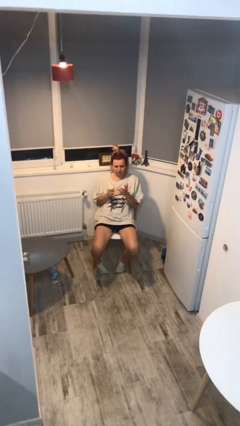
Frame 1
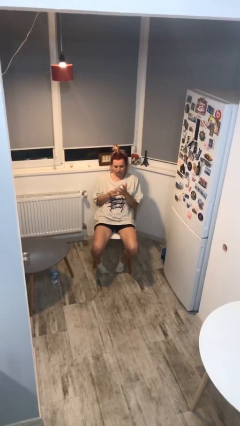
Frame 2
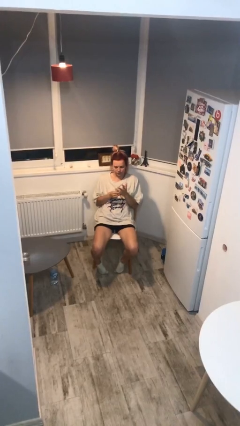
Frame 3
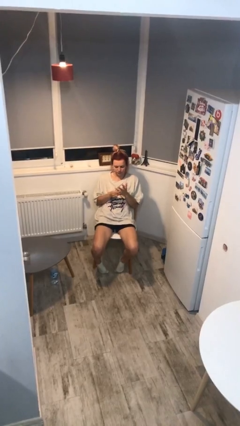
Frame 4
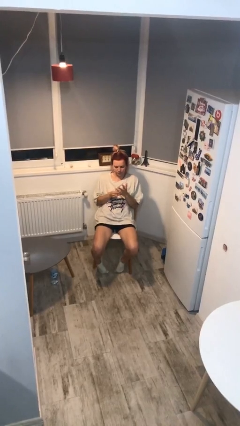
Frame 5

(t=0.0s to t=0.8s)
person puts on ring

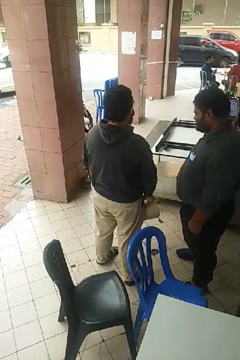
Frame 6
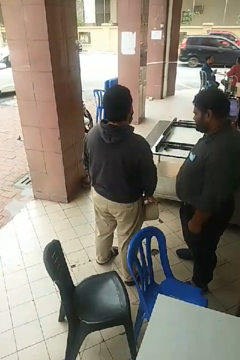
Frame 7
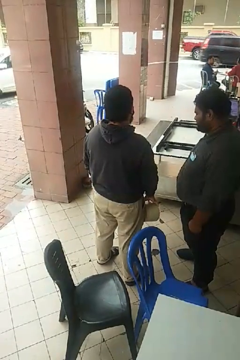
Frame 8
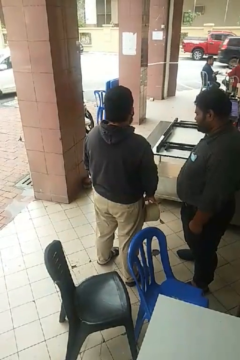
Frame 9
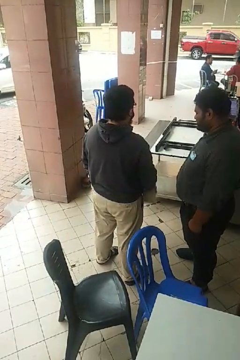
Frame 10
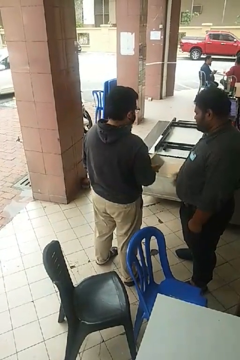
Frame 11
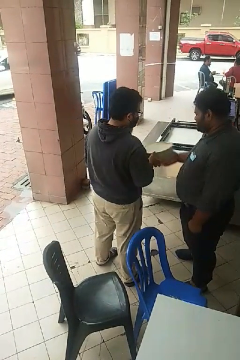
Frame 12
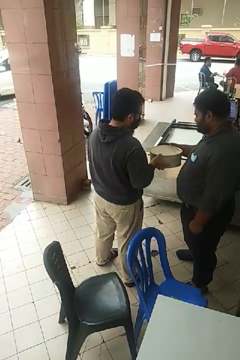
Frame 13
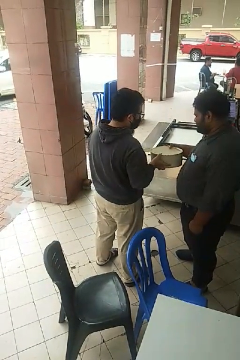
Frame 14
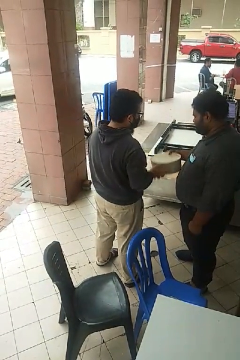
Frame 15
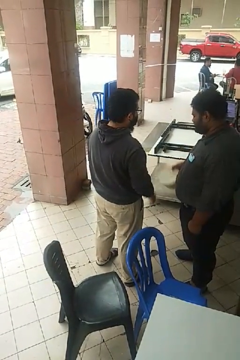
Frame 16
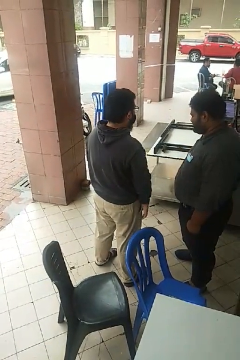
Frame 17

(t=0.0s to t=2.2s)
person transfers object to person

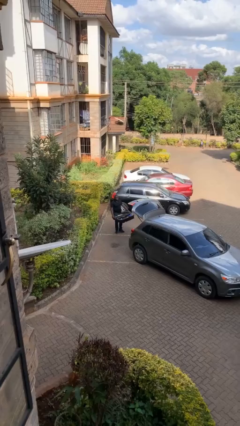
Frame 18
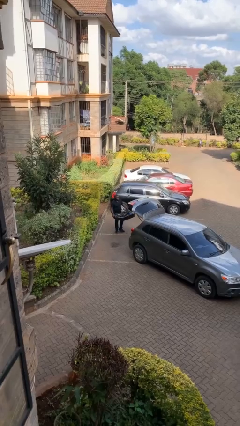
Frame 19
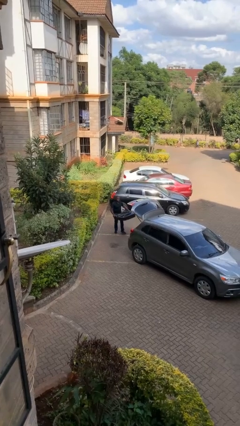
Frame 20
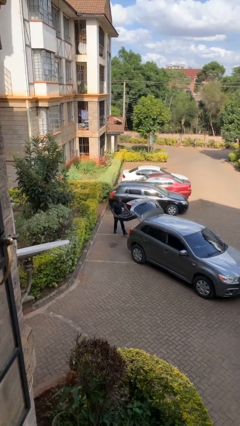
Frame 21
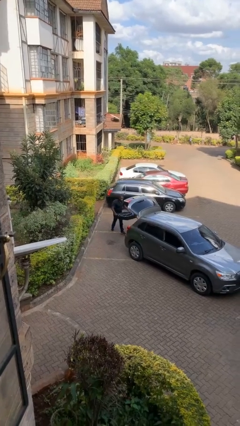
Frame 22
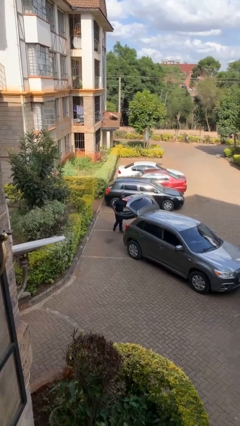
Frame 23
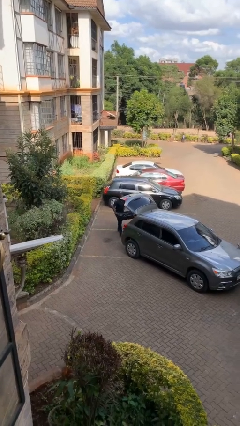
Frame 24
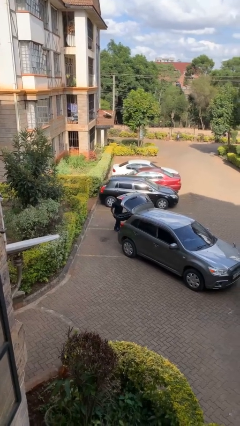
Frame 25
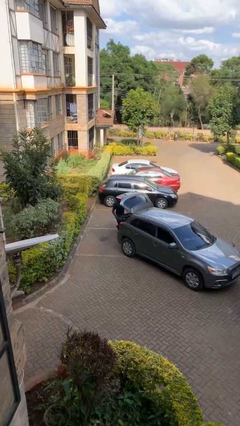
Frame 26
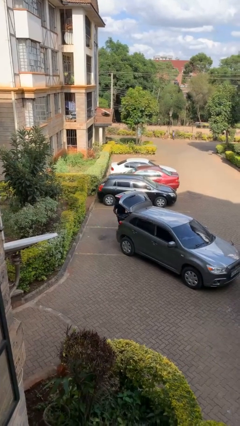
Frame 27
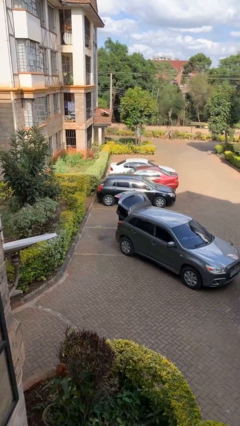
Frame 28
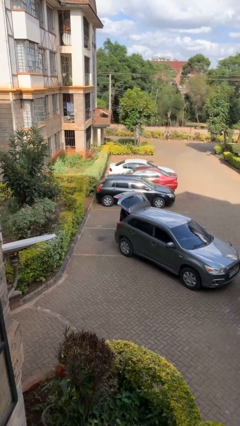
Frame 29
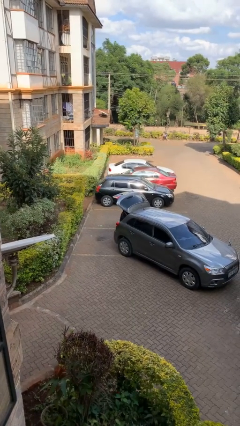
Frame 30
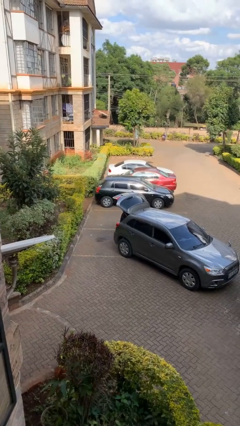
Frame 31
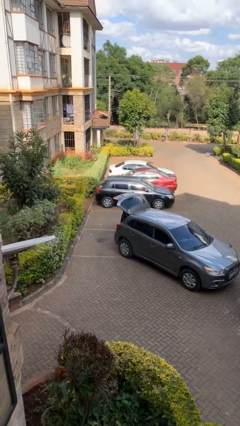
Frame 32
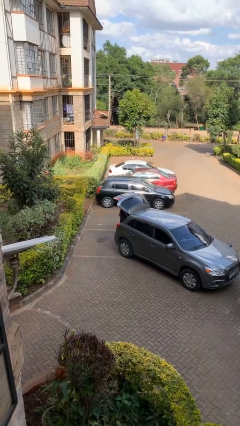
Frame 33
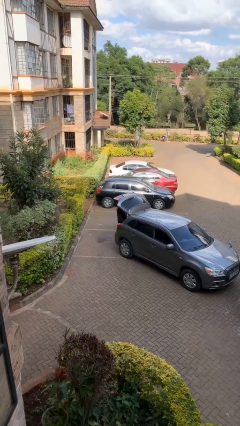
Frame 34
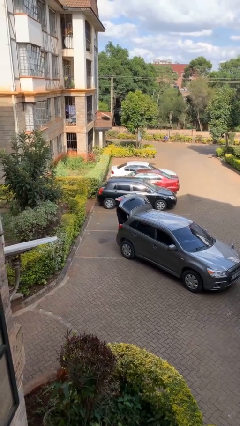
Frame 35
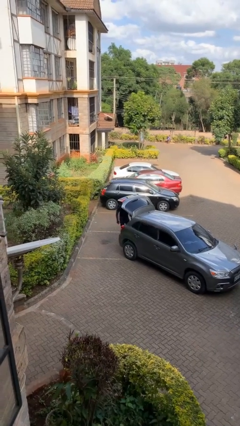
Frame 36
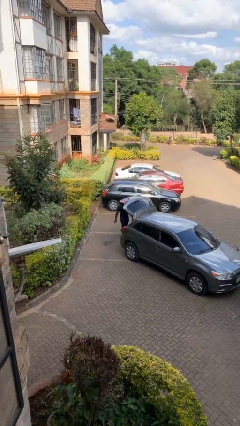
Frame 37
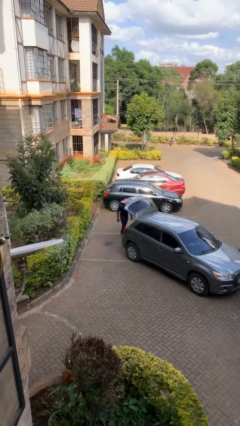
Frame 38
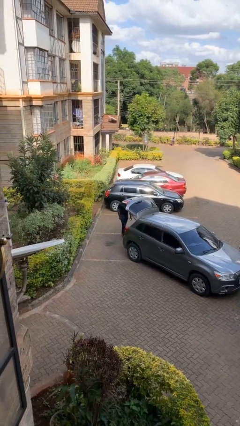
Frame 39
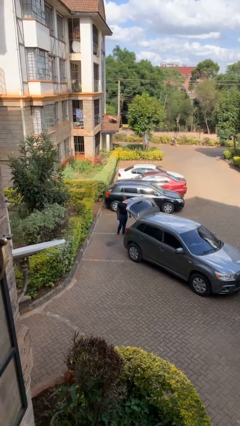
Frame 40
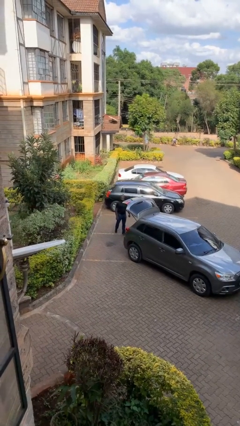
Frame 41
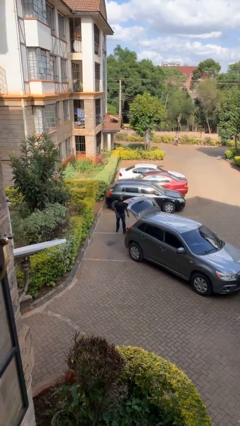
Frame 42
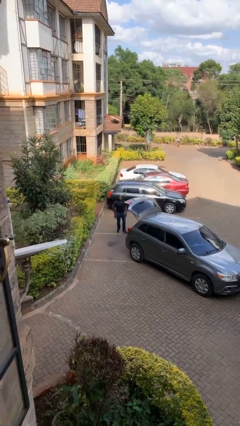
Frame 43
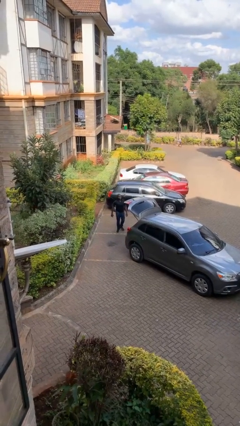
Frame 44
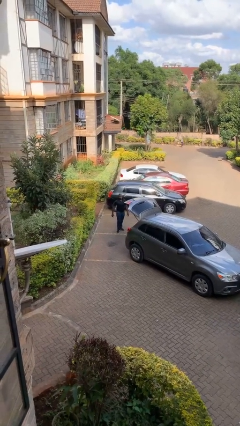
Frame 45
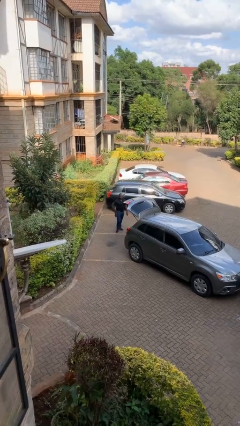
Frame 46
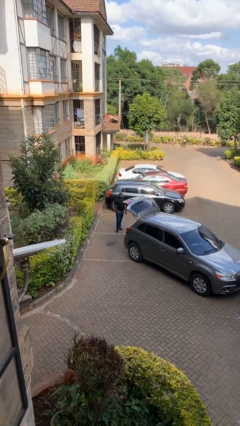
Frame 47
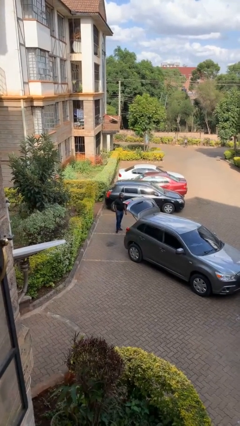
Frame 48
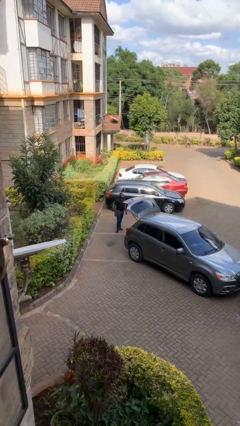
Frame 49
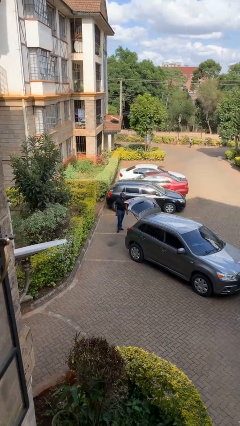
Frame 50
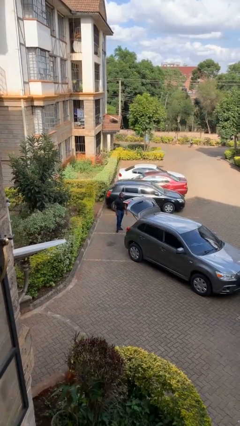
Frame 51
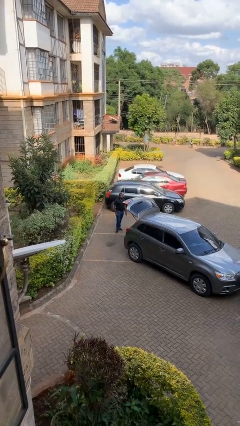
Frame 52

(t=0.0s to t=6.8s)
person loads car

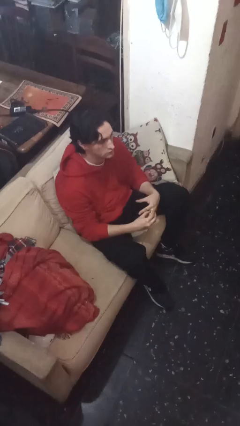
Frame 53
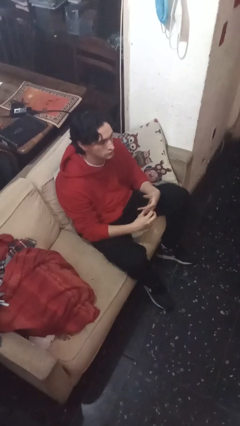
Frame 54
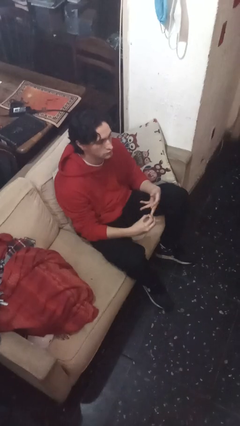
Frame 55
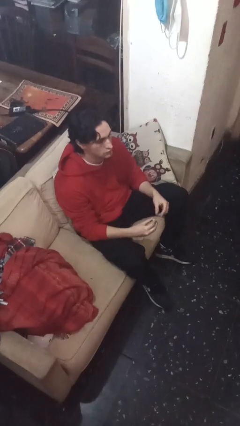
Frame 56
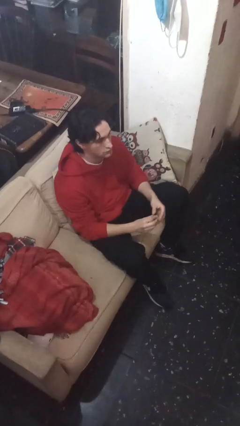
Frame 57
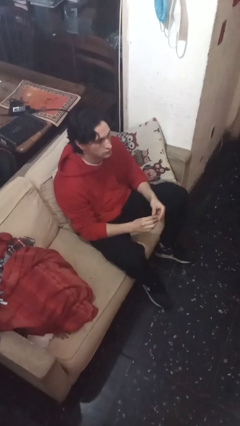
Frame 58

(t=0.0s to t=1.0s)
person takes off ring

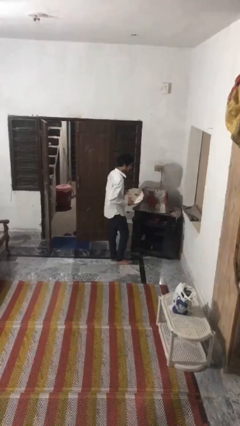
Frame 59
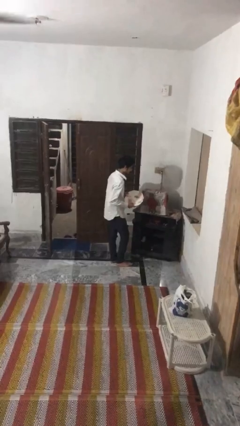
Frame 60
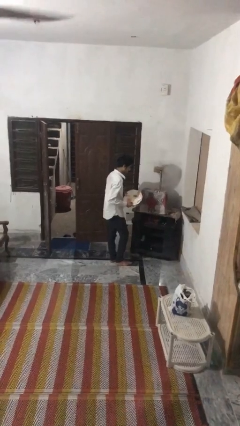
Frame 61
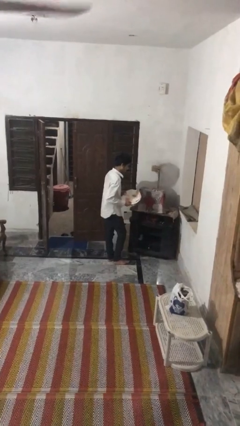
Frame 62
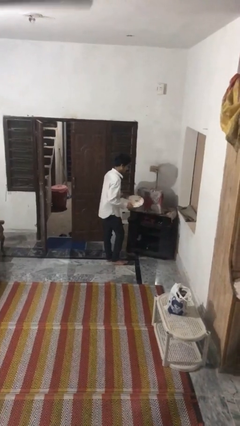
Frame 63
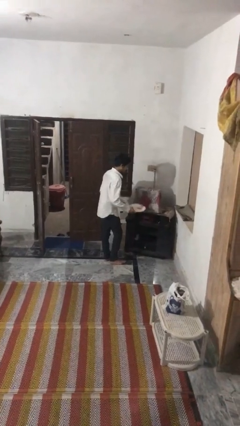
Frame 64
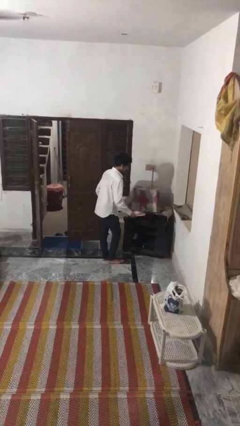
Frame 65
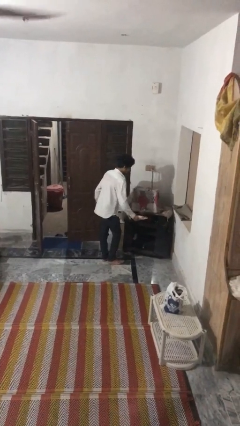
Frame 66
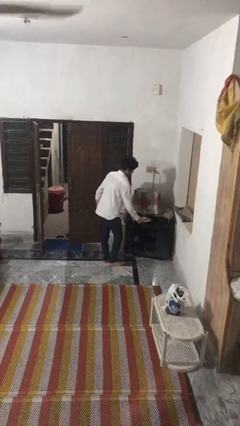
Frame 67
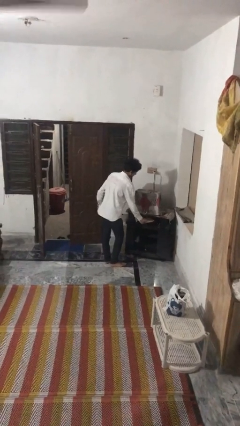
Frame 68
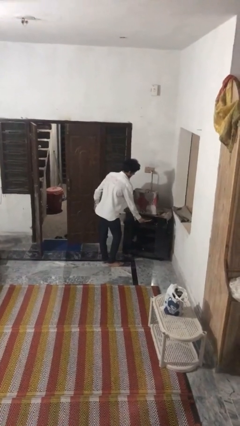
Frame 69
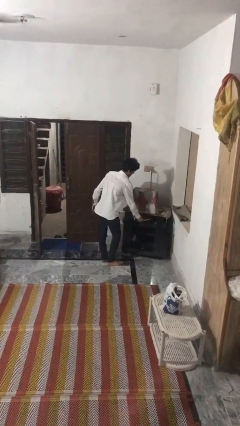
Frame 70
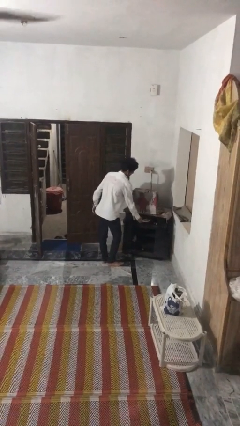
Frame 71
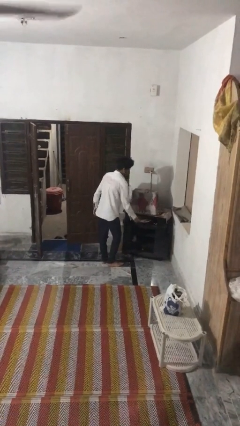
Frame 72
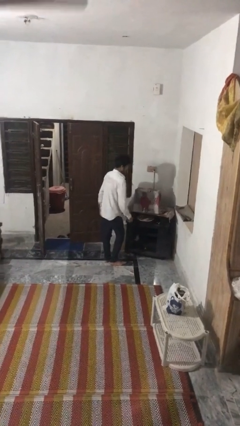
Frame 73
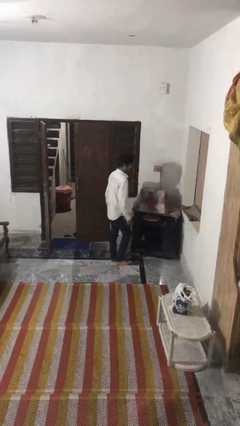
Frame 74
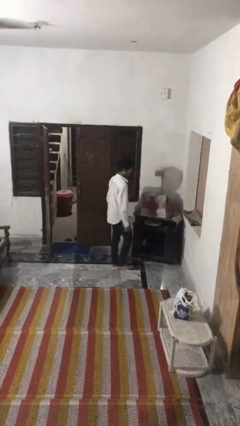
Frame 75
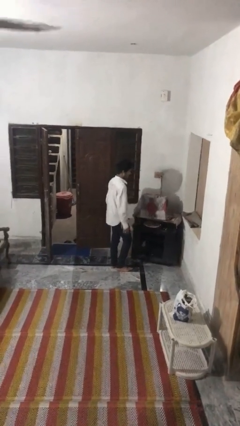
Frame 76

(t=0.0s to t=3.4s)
person puts down object into cabinet

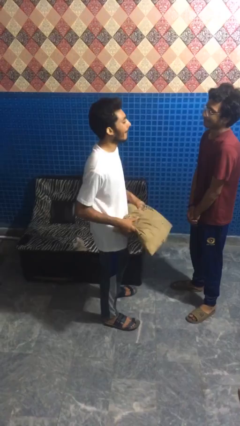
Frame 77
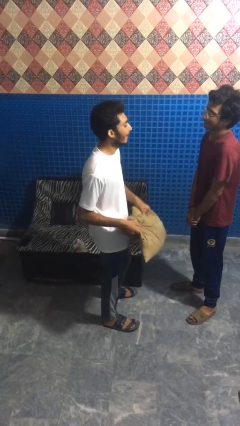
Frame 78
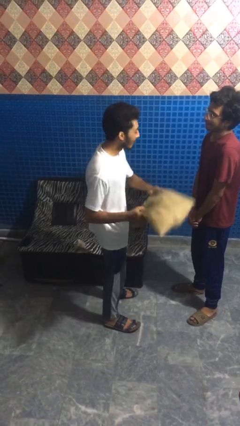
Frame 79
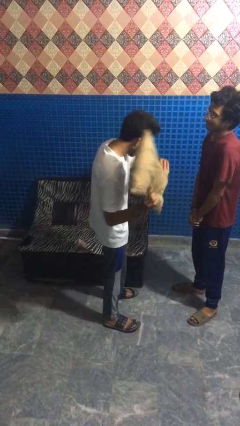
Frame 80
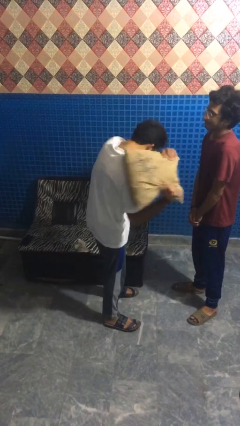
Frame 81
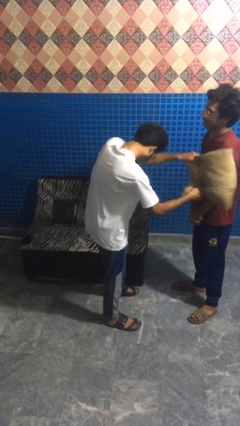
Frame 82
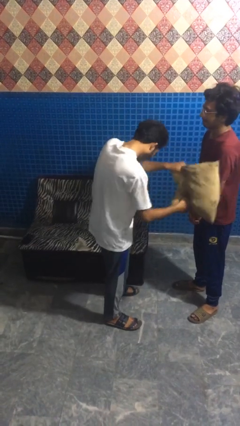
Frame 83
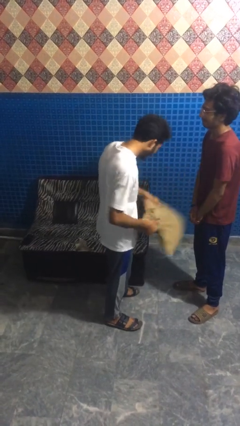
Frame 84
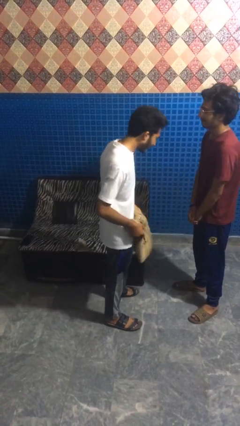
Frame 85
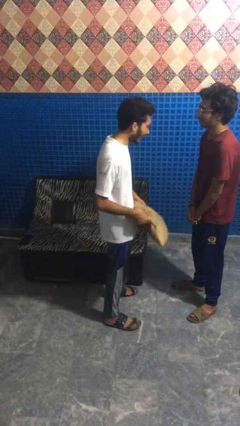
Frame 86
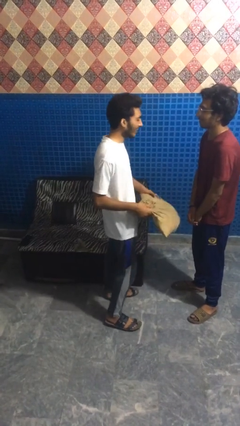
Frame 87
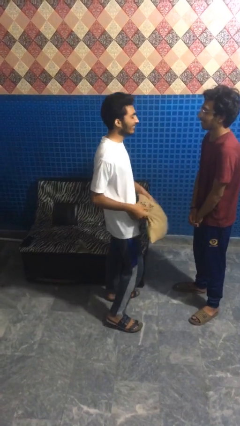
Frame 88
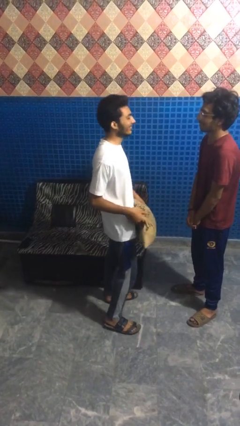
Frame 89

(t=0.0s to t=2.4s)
person hits person with pillow

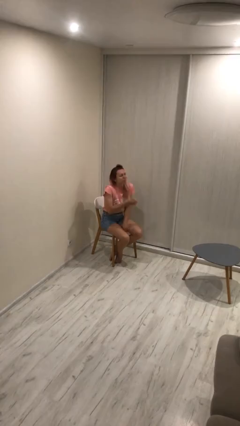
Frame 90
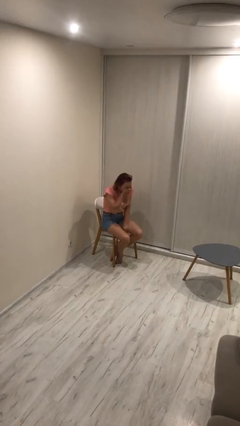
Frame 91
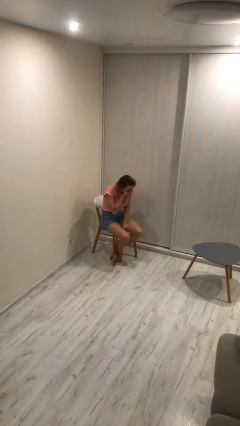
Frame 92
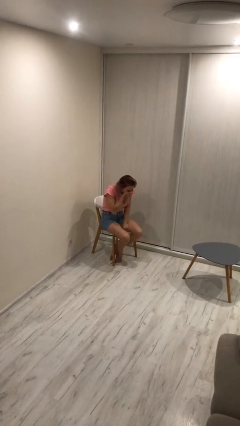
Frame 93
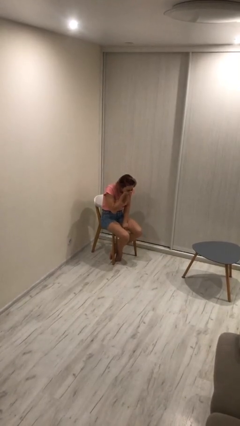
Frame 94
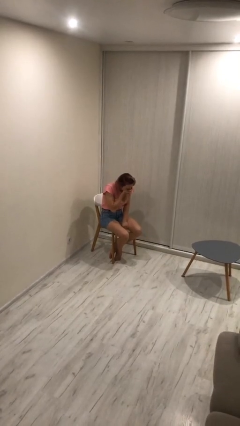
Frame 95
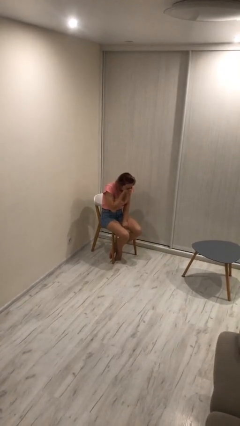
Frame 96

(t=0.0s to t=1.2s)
person sneezes into arm
